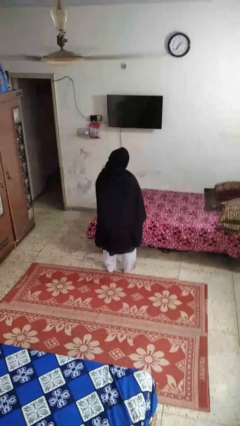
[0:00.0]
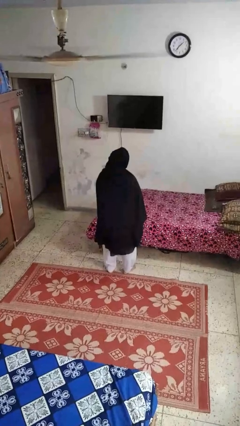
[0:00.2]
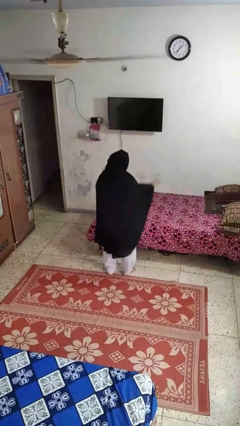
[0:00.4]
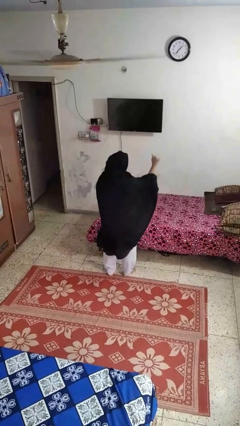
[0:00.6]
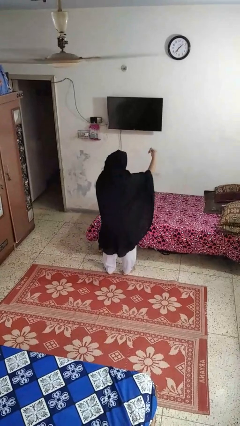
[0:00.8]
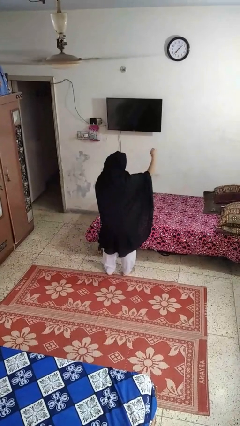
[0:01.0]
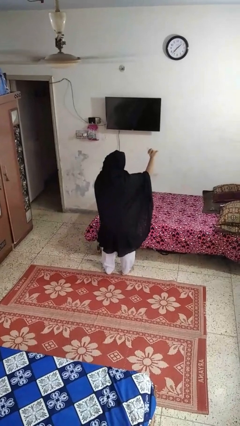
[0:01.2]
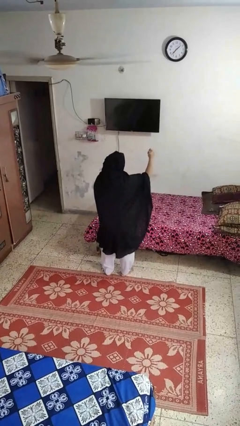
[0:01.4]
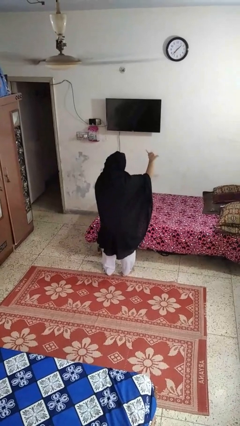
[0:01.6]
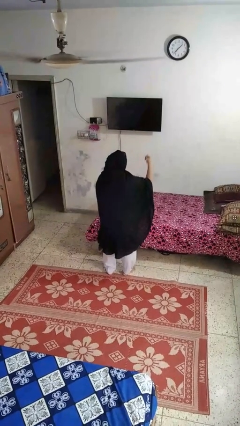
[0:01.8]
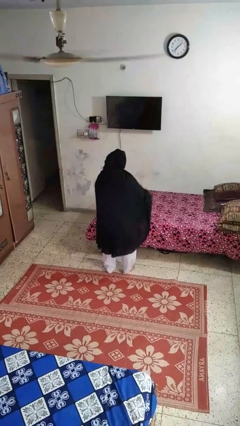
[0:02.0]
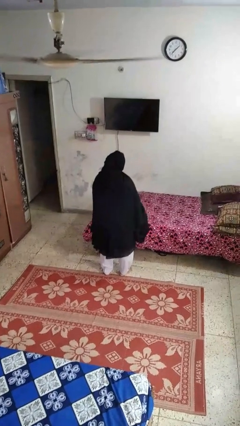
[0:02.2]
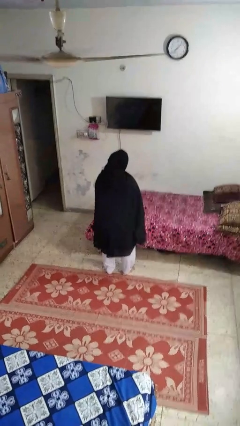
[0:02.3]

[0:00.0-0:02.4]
person gestures hang loose

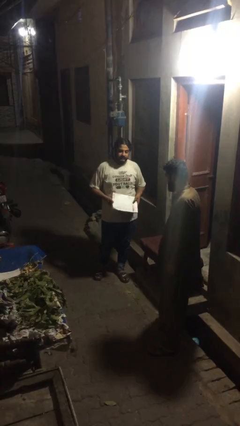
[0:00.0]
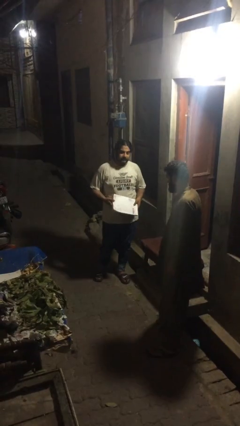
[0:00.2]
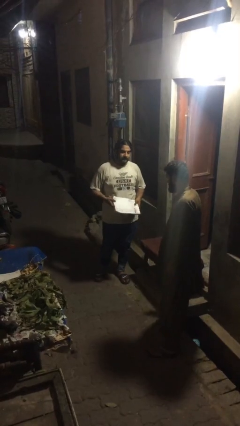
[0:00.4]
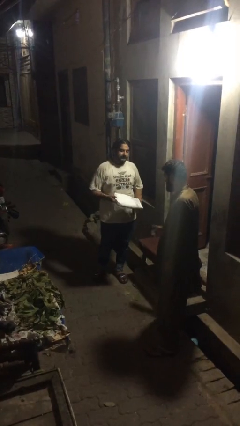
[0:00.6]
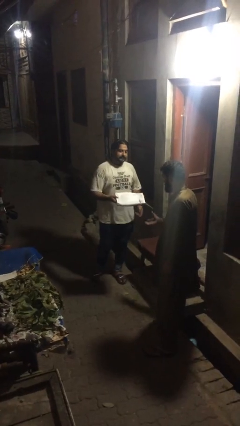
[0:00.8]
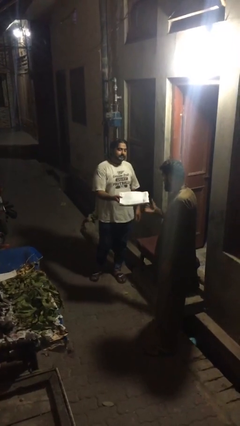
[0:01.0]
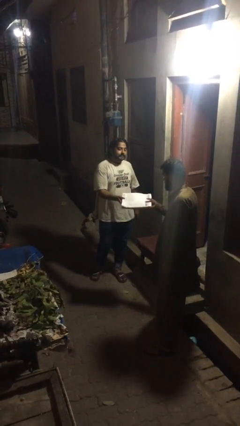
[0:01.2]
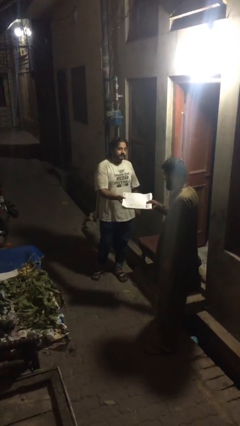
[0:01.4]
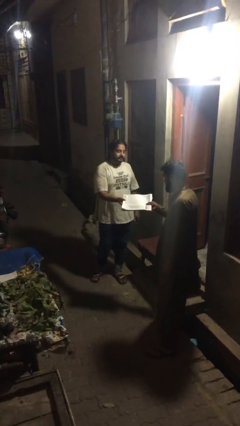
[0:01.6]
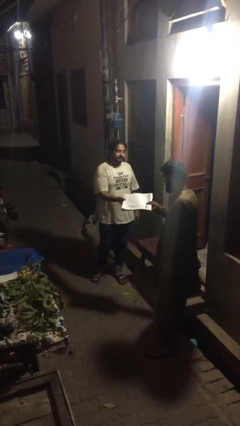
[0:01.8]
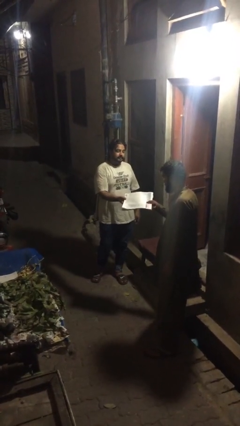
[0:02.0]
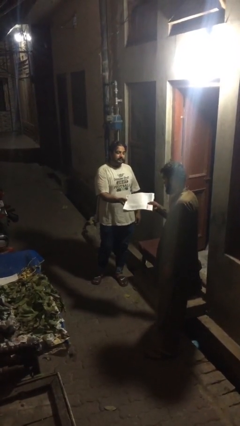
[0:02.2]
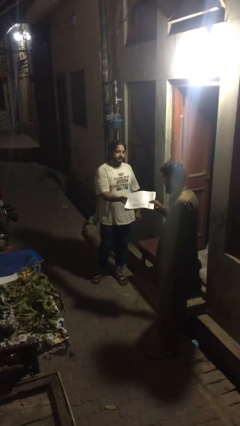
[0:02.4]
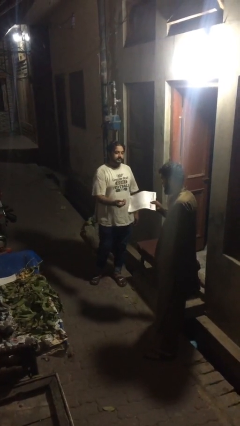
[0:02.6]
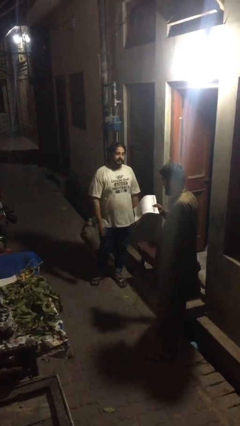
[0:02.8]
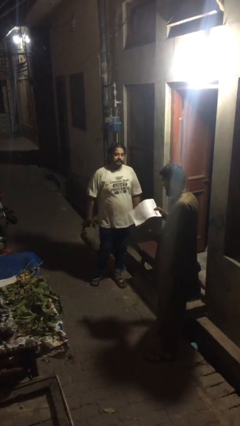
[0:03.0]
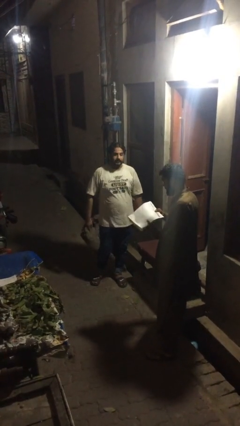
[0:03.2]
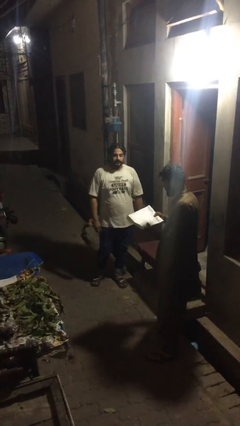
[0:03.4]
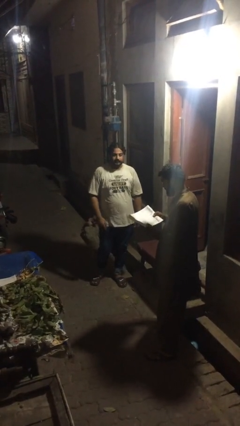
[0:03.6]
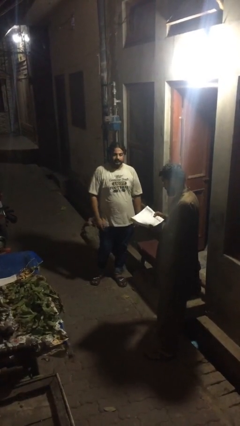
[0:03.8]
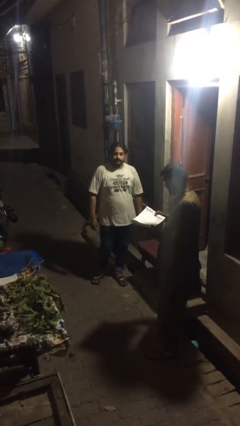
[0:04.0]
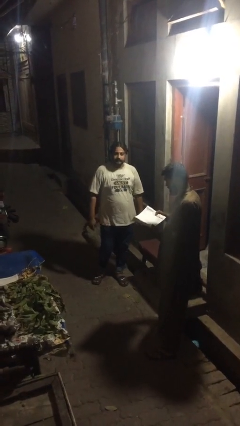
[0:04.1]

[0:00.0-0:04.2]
person transfers object to person

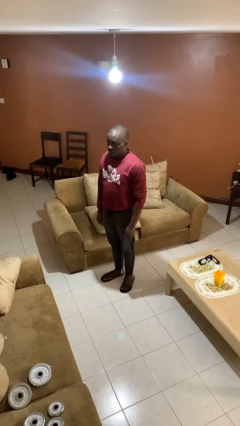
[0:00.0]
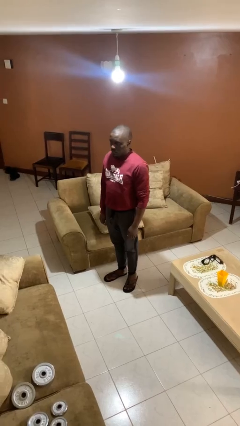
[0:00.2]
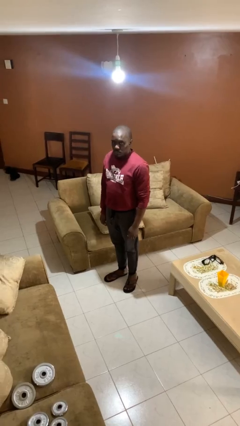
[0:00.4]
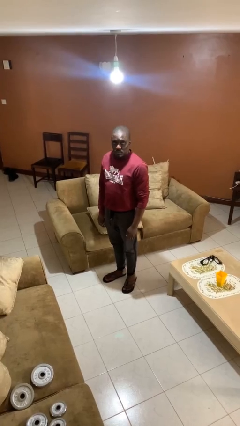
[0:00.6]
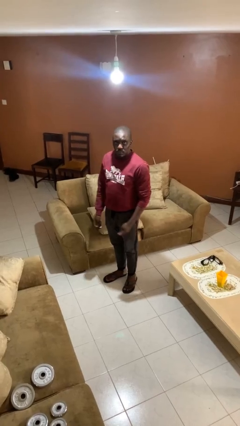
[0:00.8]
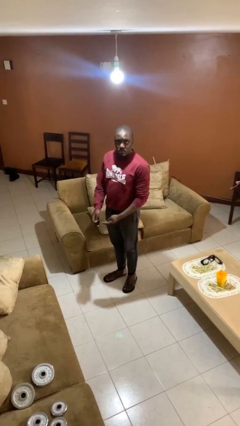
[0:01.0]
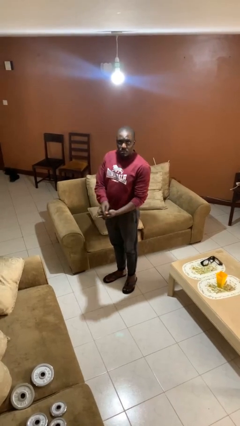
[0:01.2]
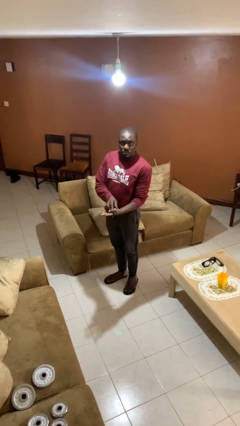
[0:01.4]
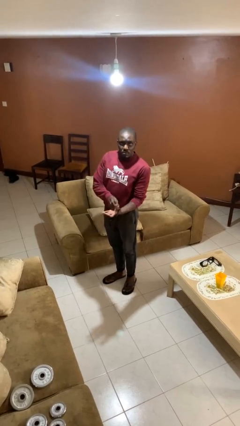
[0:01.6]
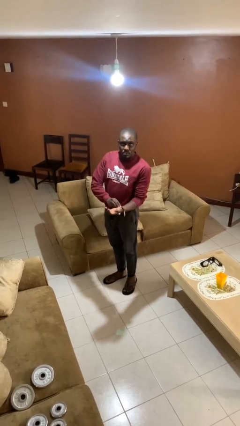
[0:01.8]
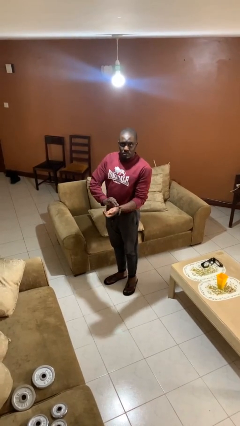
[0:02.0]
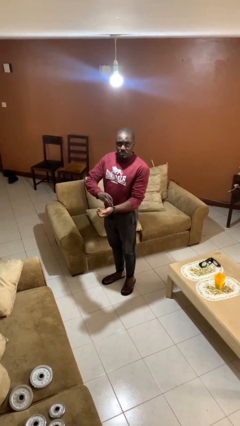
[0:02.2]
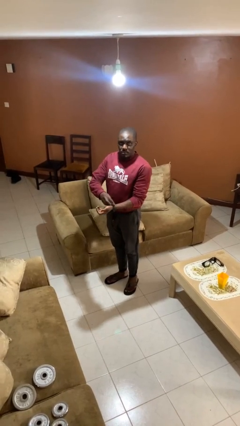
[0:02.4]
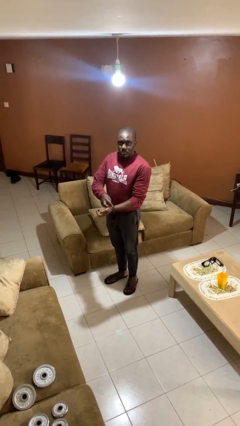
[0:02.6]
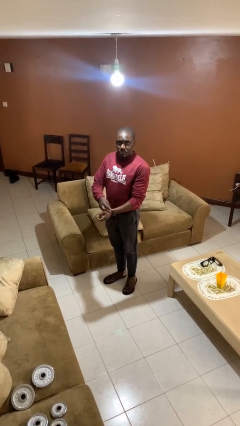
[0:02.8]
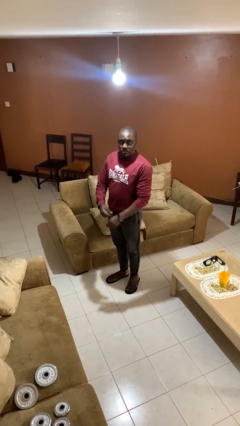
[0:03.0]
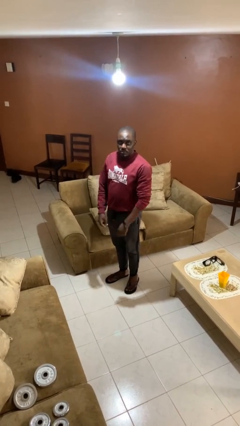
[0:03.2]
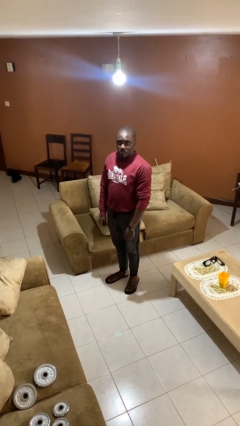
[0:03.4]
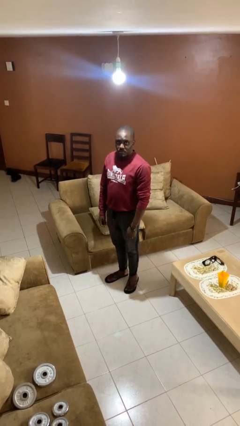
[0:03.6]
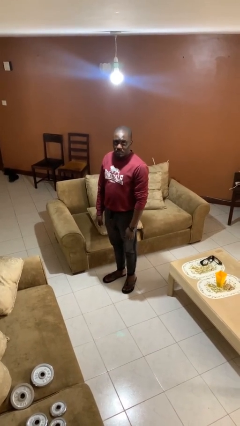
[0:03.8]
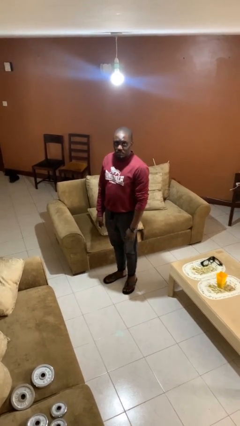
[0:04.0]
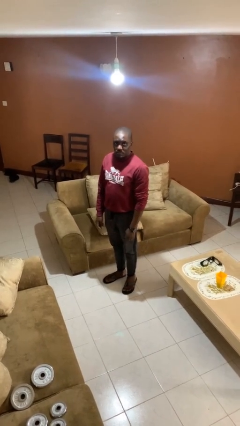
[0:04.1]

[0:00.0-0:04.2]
person puts on wristwatch

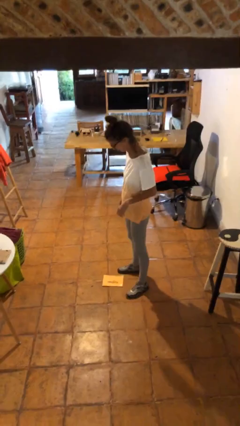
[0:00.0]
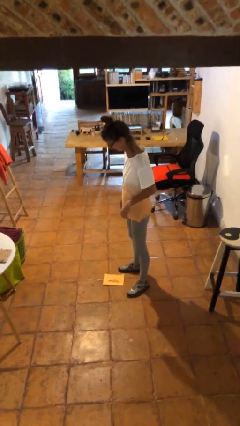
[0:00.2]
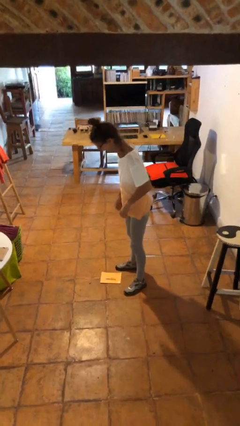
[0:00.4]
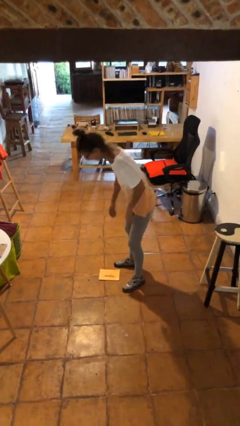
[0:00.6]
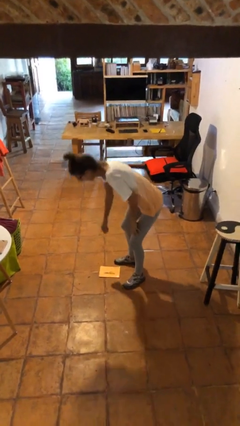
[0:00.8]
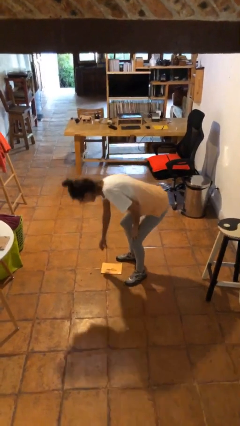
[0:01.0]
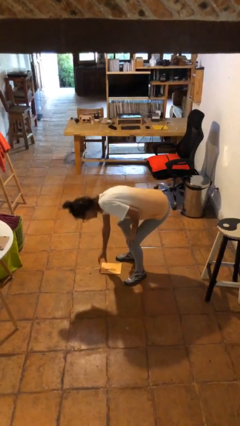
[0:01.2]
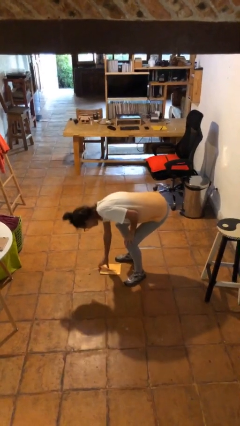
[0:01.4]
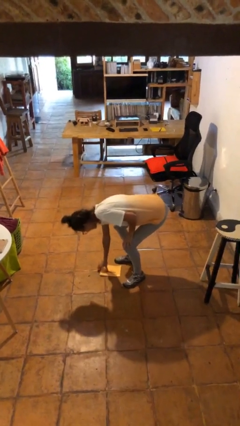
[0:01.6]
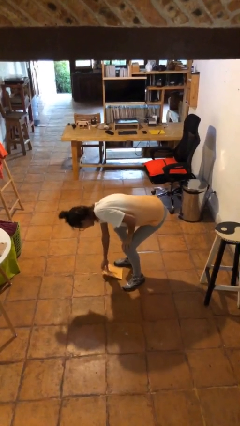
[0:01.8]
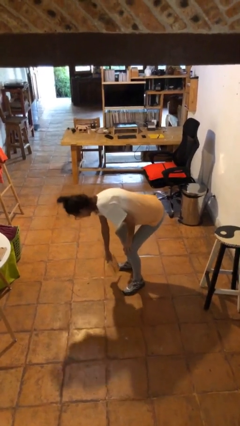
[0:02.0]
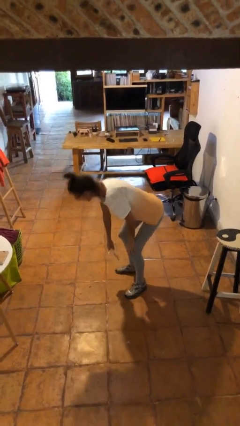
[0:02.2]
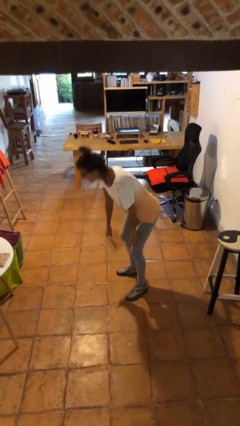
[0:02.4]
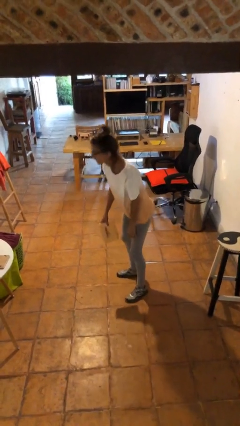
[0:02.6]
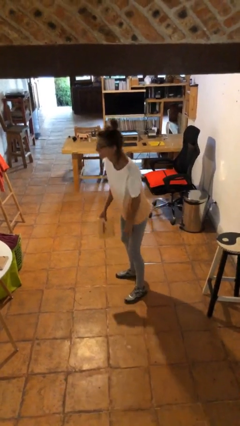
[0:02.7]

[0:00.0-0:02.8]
person picks up object from floor

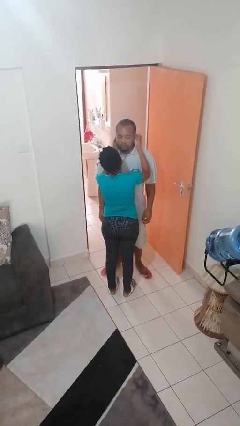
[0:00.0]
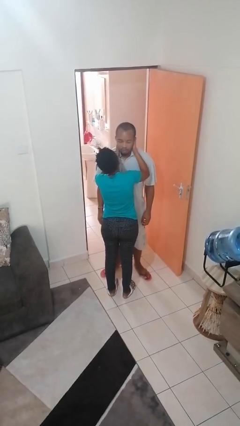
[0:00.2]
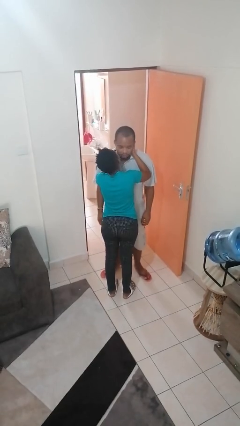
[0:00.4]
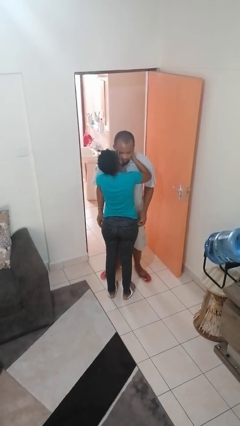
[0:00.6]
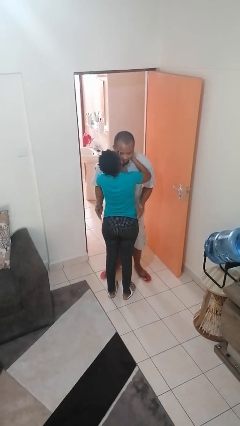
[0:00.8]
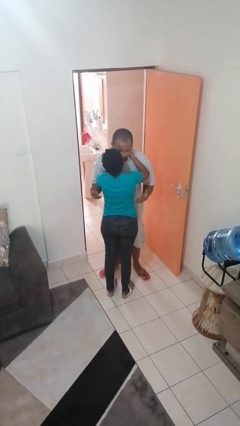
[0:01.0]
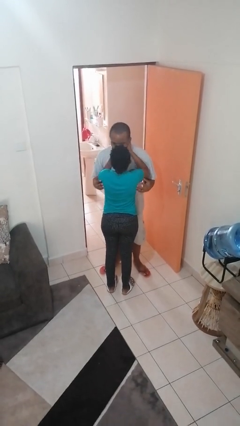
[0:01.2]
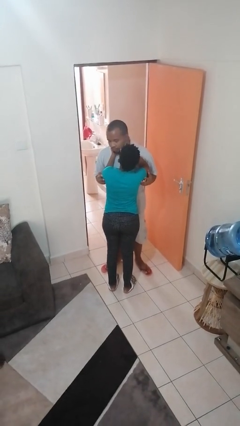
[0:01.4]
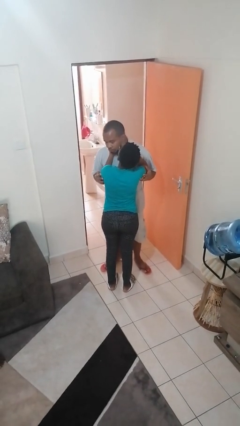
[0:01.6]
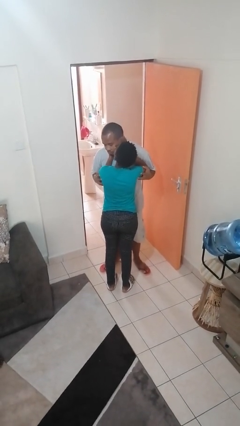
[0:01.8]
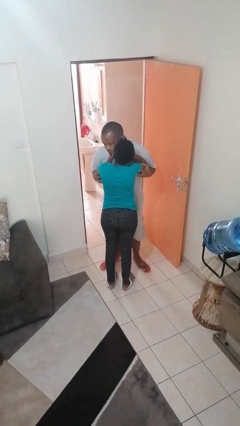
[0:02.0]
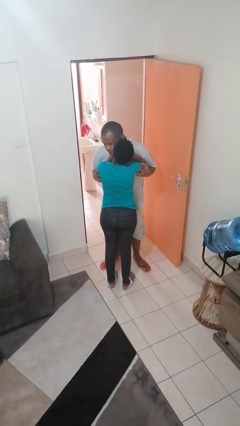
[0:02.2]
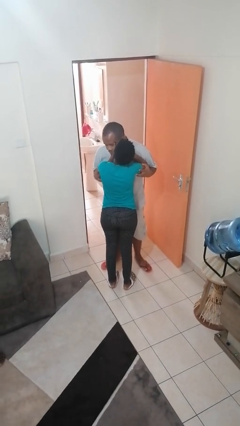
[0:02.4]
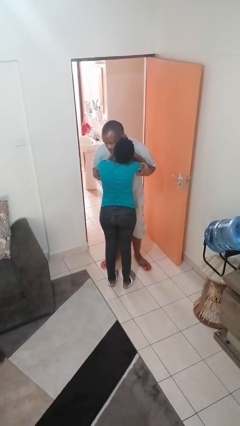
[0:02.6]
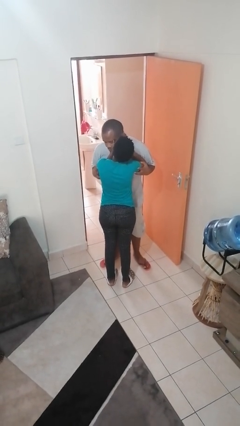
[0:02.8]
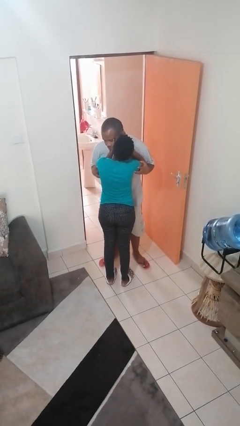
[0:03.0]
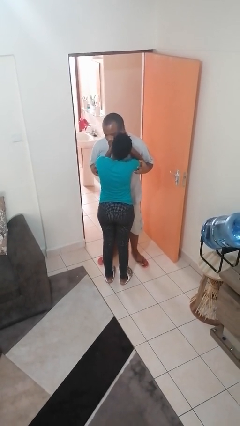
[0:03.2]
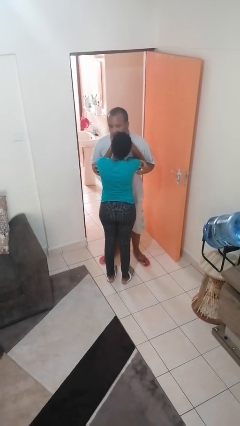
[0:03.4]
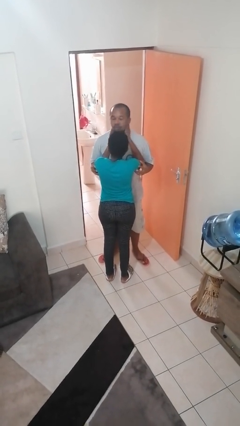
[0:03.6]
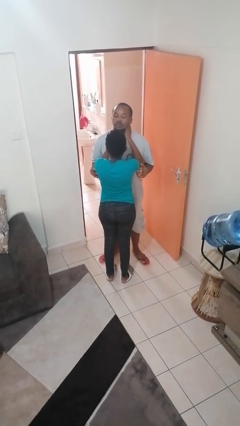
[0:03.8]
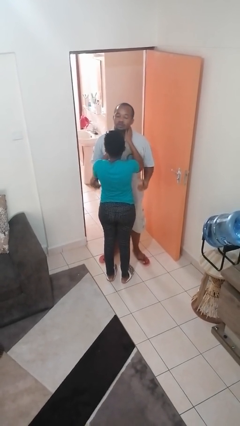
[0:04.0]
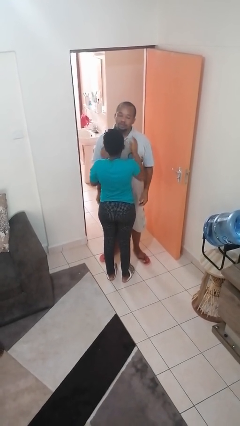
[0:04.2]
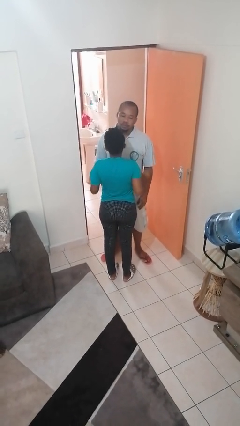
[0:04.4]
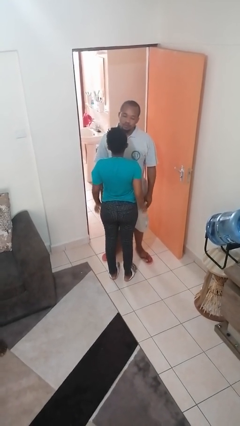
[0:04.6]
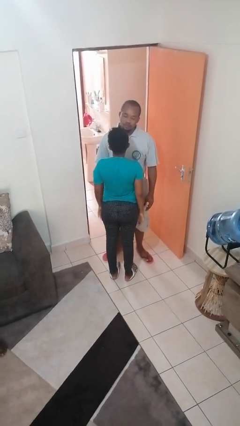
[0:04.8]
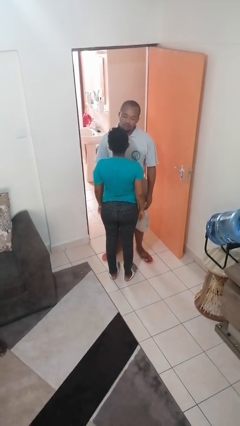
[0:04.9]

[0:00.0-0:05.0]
person kisses cheek of person
